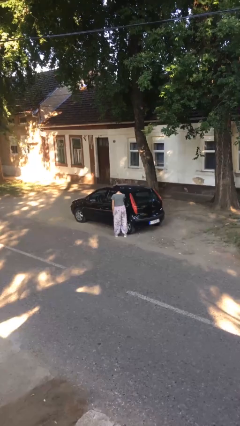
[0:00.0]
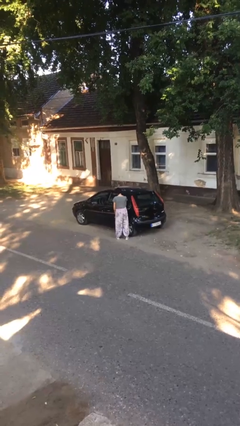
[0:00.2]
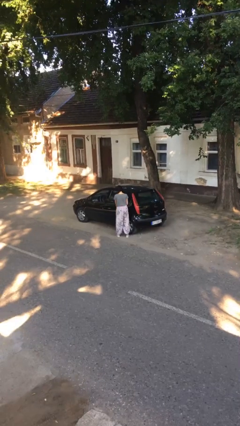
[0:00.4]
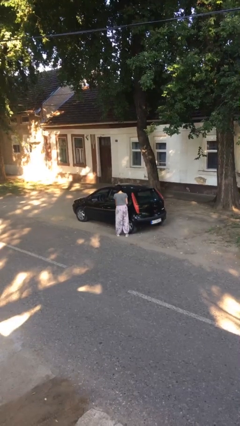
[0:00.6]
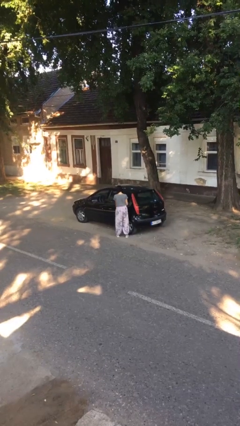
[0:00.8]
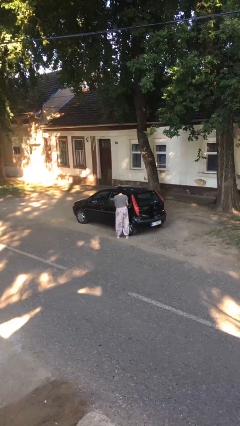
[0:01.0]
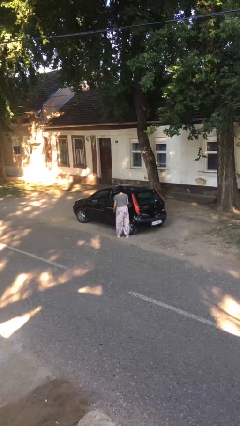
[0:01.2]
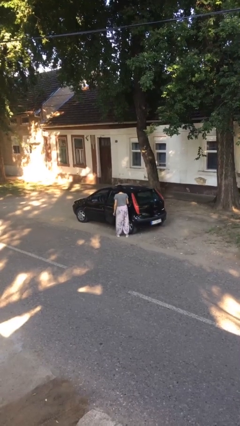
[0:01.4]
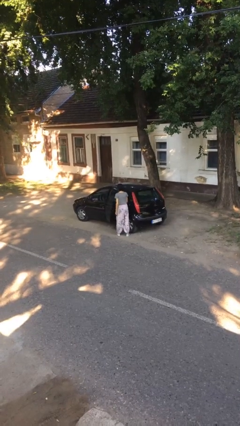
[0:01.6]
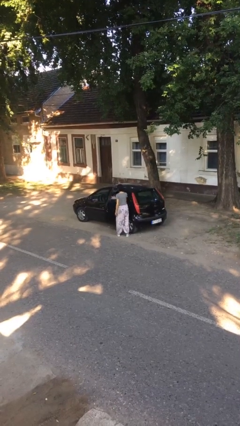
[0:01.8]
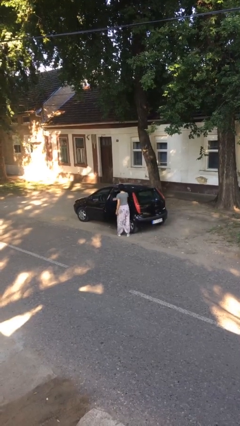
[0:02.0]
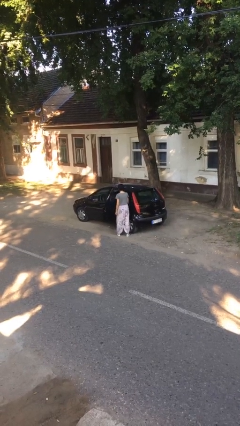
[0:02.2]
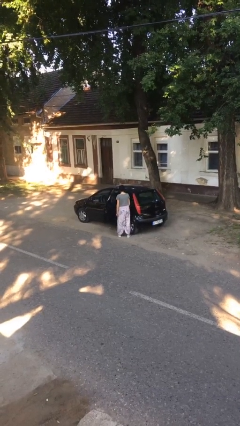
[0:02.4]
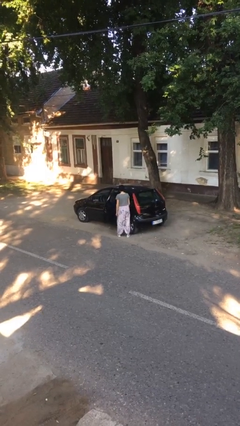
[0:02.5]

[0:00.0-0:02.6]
person opens car door

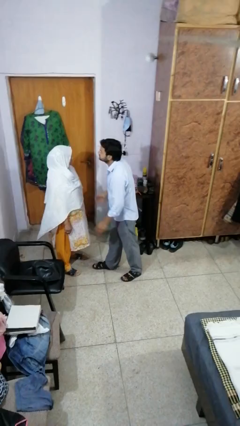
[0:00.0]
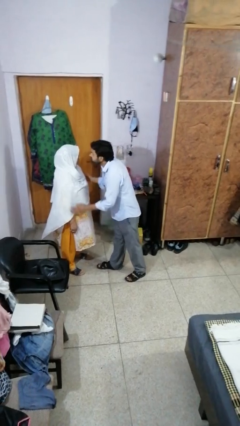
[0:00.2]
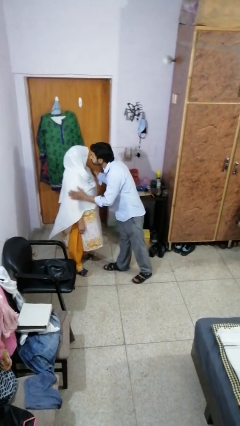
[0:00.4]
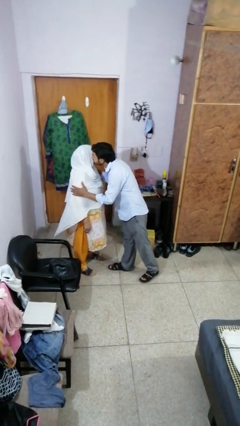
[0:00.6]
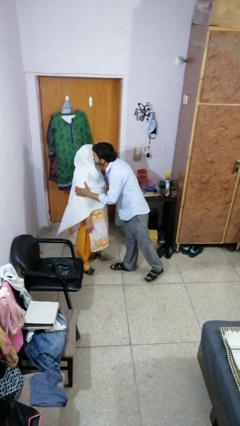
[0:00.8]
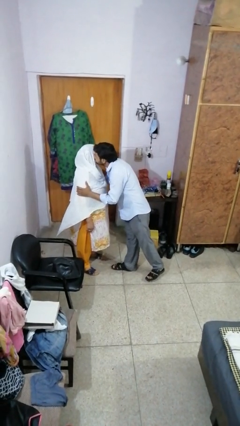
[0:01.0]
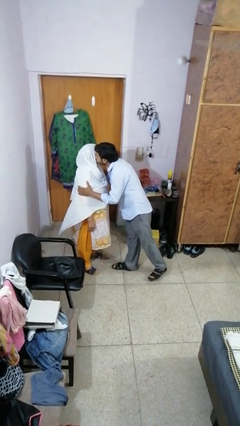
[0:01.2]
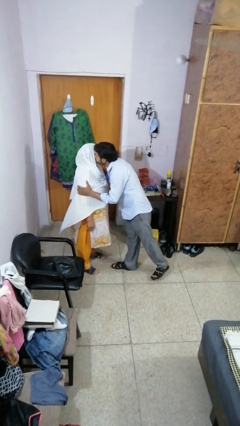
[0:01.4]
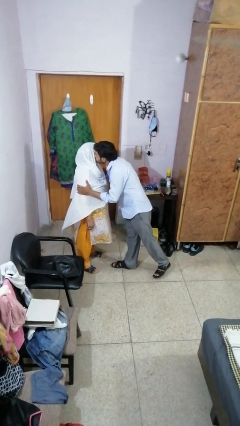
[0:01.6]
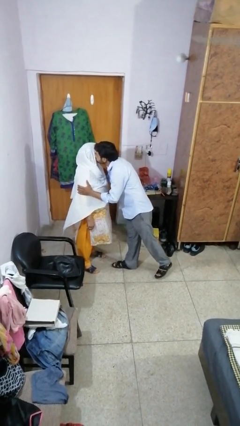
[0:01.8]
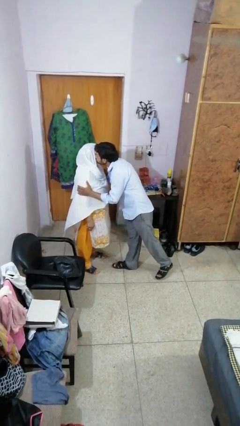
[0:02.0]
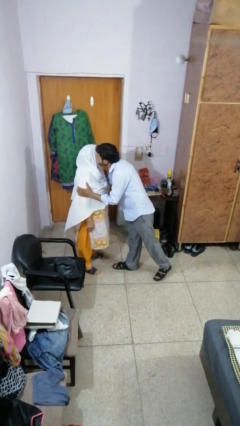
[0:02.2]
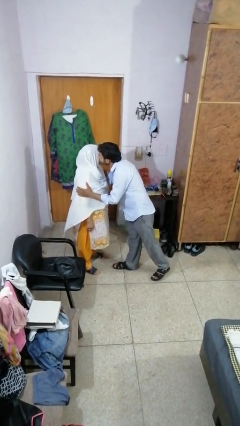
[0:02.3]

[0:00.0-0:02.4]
person kisses cheek of person

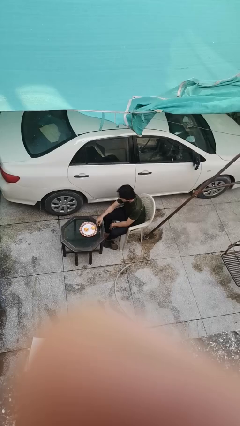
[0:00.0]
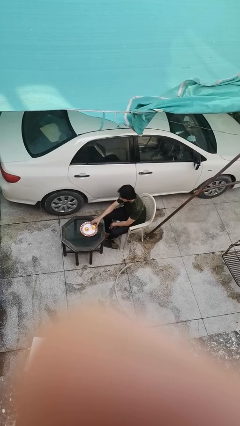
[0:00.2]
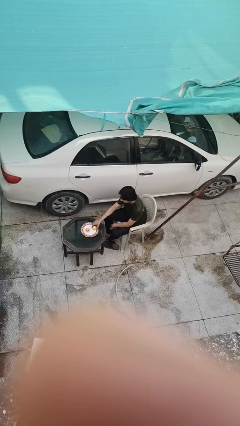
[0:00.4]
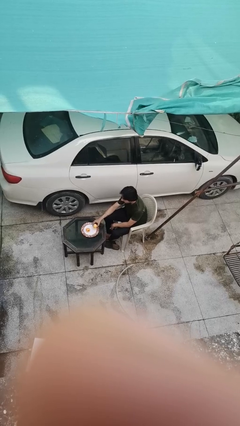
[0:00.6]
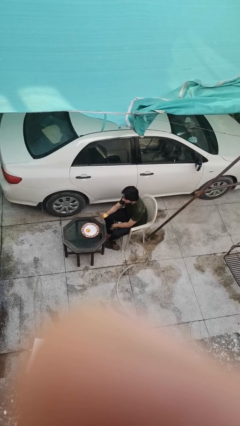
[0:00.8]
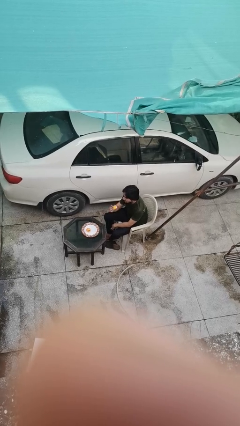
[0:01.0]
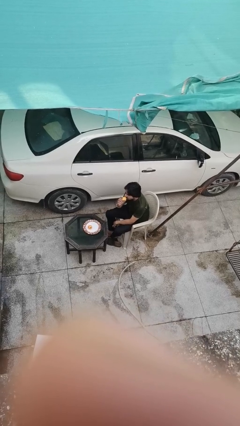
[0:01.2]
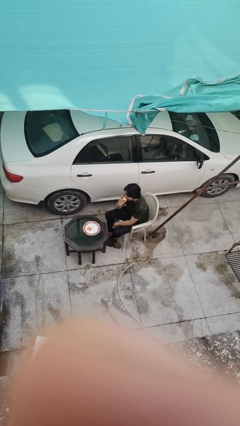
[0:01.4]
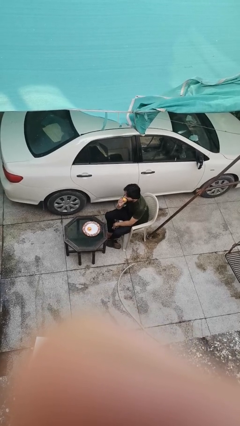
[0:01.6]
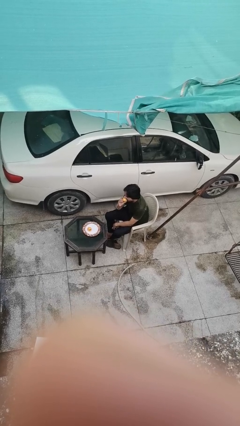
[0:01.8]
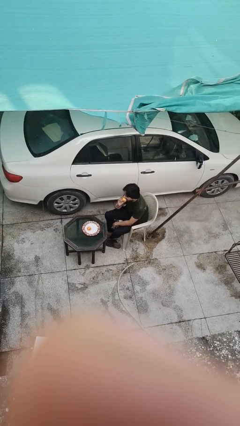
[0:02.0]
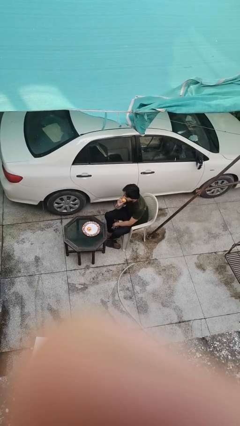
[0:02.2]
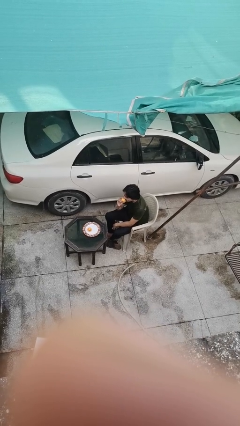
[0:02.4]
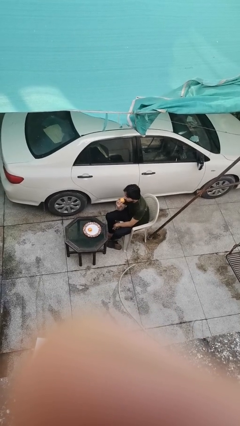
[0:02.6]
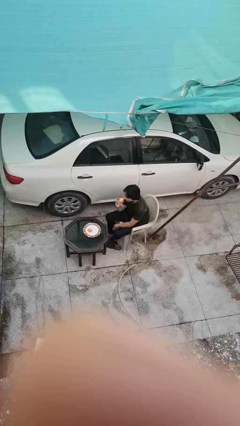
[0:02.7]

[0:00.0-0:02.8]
person eats with hands

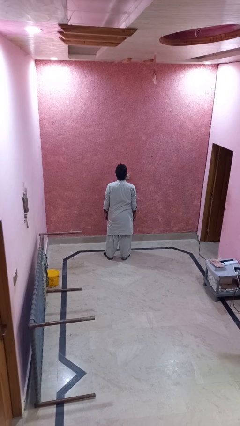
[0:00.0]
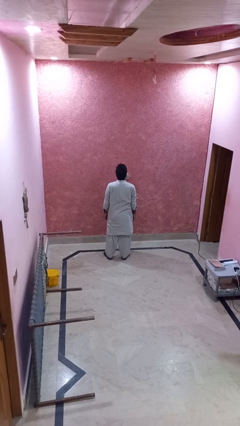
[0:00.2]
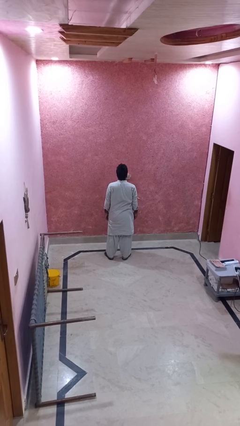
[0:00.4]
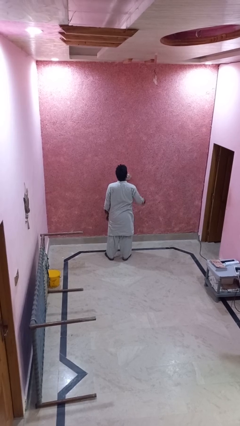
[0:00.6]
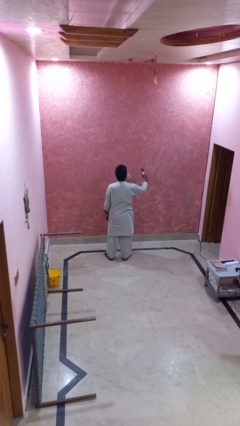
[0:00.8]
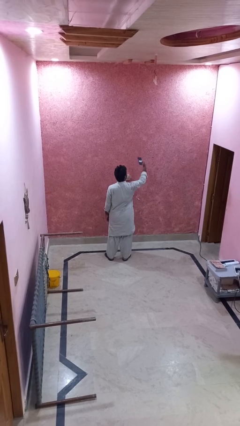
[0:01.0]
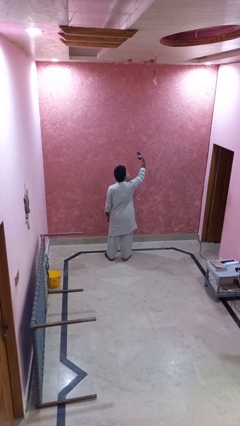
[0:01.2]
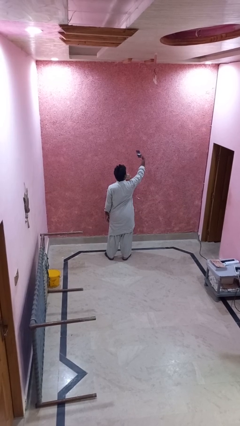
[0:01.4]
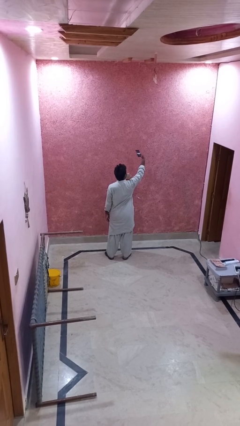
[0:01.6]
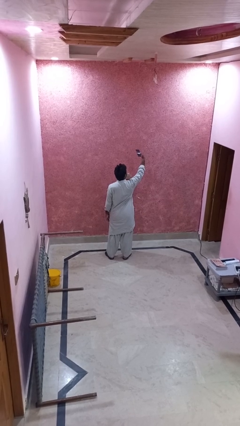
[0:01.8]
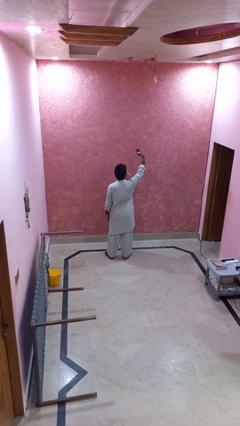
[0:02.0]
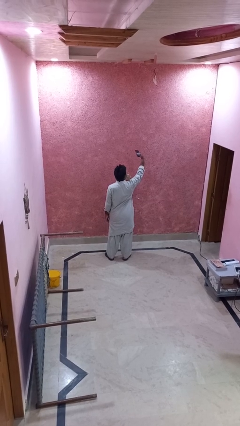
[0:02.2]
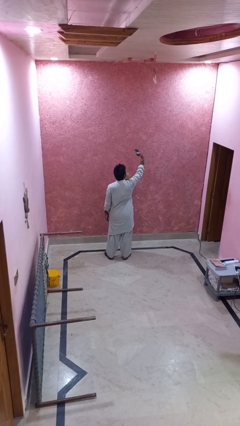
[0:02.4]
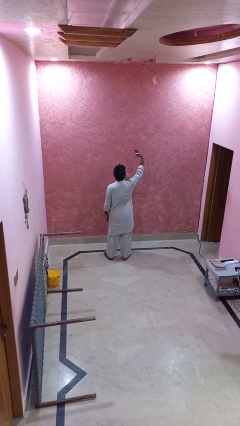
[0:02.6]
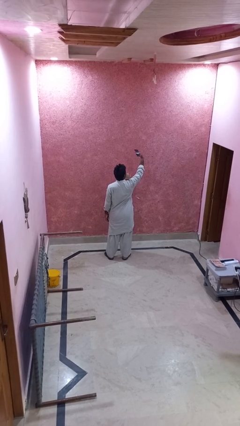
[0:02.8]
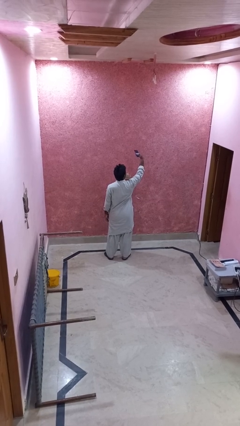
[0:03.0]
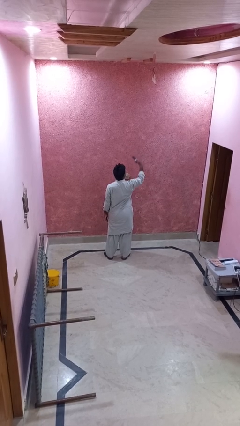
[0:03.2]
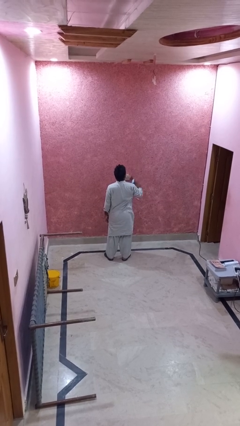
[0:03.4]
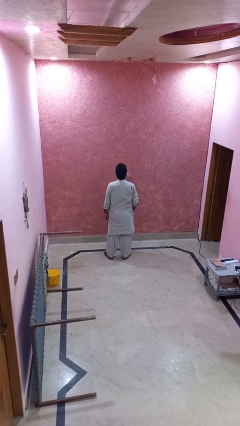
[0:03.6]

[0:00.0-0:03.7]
person takes selfie

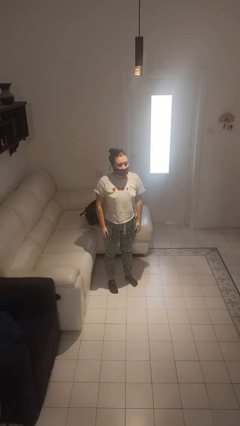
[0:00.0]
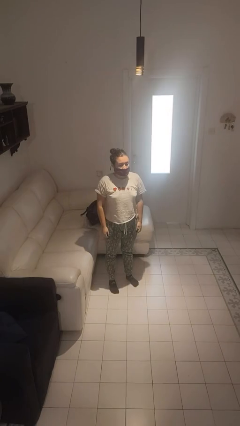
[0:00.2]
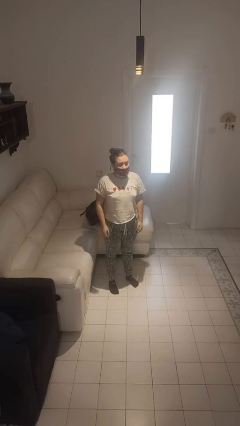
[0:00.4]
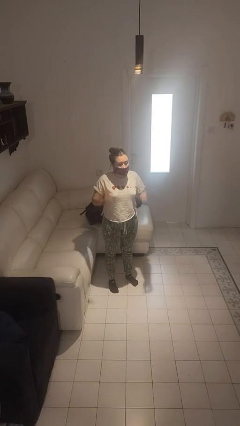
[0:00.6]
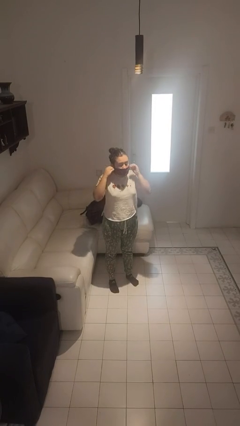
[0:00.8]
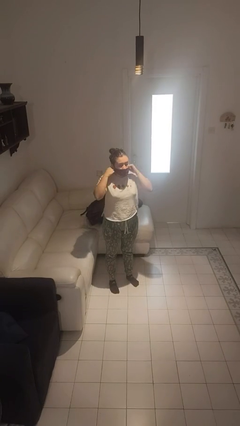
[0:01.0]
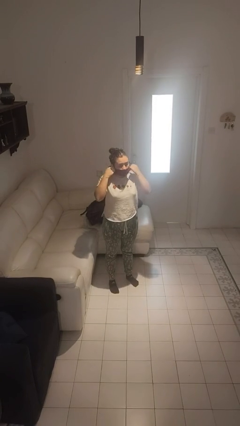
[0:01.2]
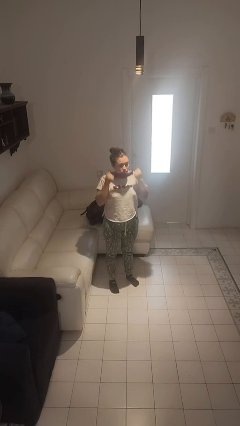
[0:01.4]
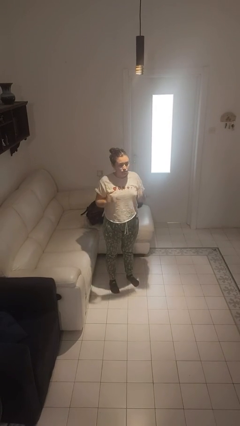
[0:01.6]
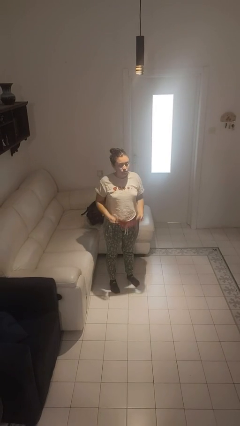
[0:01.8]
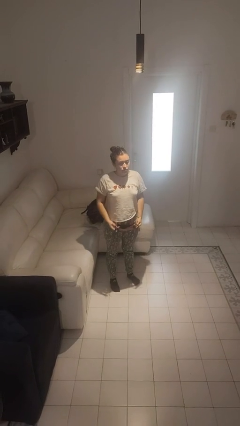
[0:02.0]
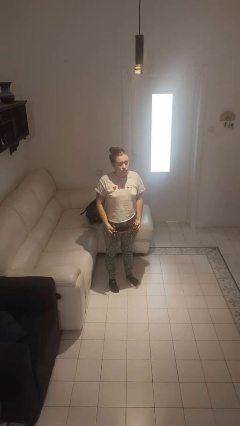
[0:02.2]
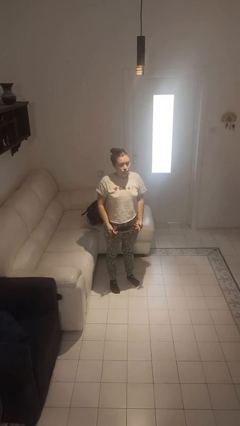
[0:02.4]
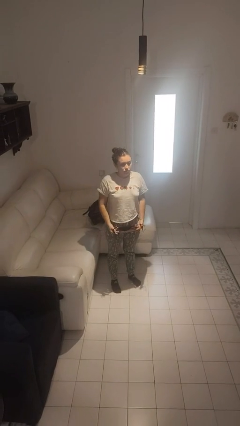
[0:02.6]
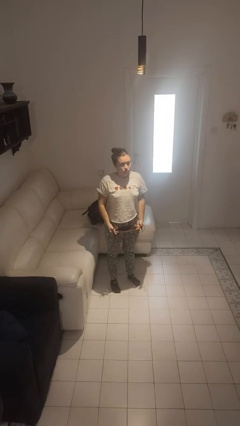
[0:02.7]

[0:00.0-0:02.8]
person takes off facemask

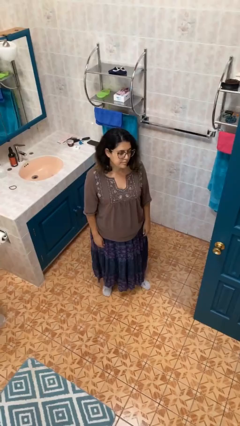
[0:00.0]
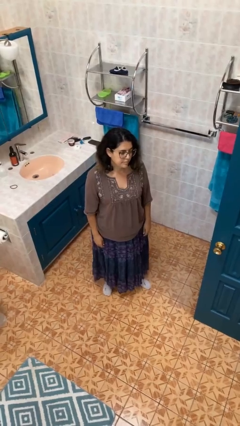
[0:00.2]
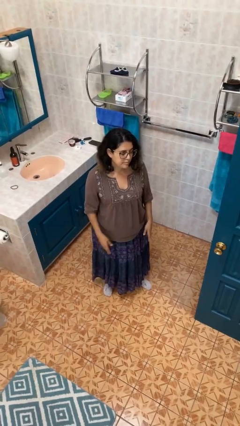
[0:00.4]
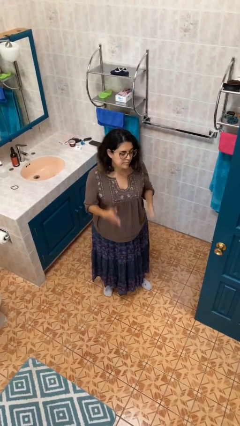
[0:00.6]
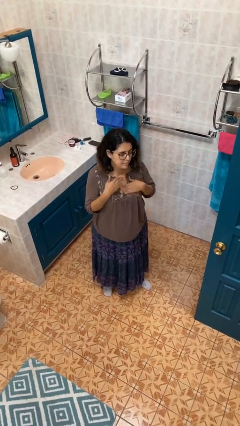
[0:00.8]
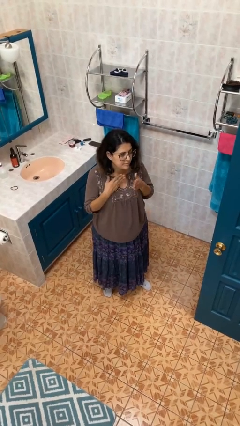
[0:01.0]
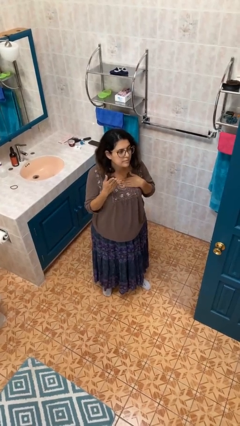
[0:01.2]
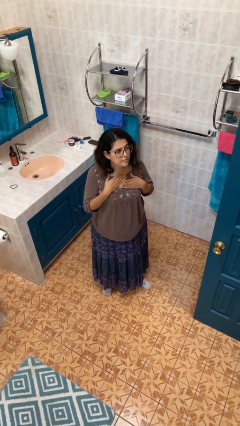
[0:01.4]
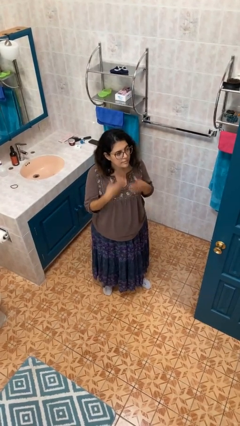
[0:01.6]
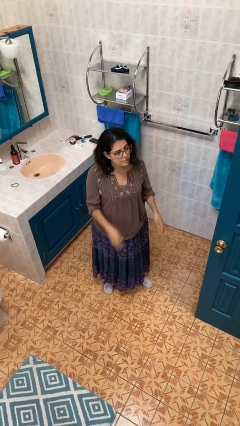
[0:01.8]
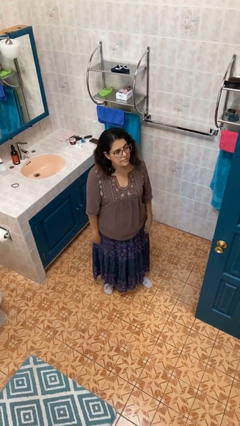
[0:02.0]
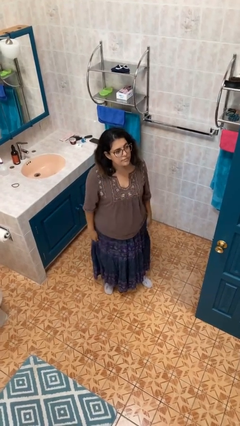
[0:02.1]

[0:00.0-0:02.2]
person drums on chest

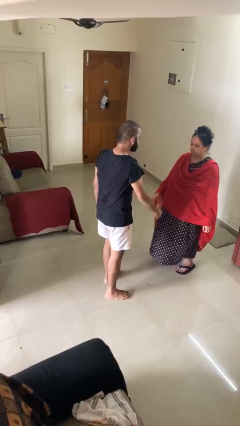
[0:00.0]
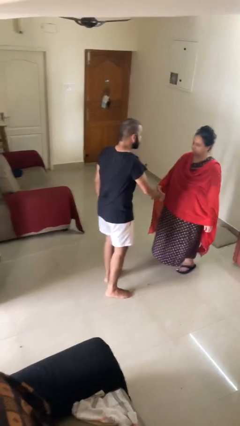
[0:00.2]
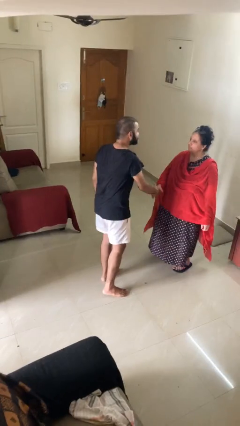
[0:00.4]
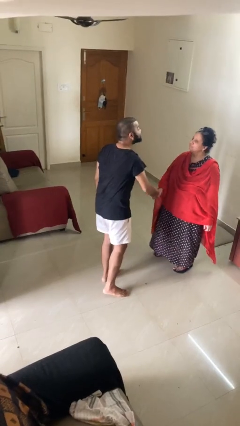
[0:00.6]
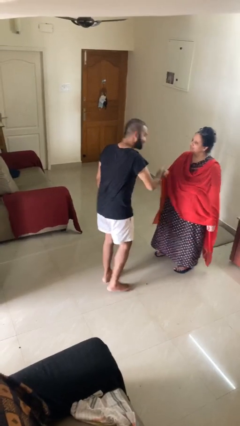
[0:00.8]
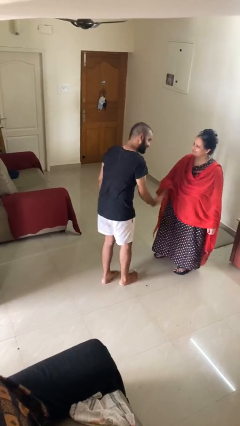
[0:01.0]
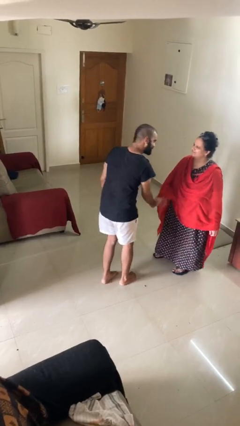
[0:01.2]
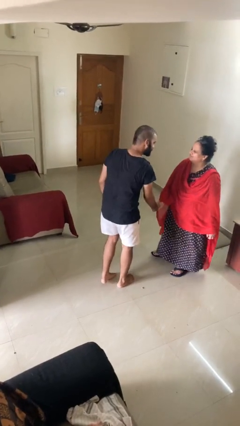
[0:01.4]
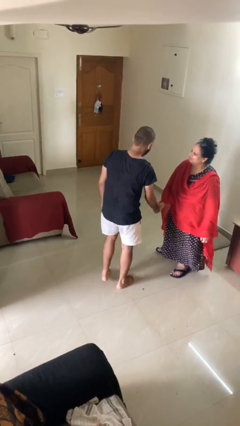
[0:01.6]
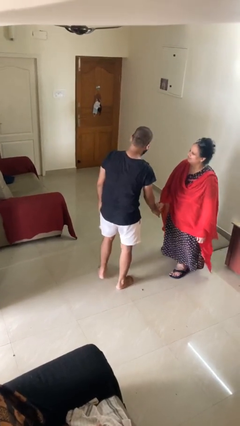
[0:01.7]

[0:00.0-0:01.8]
person shakes hand
